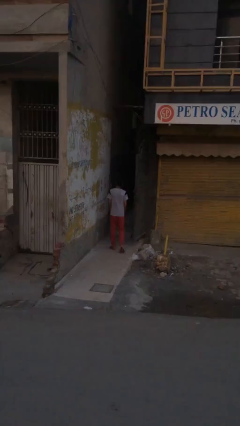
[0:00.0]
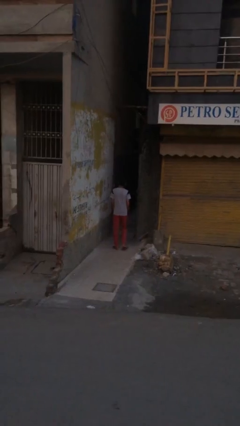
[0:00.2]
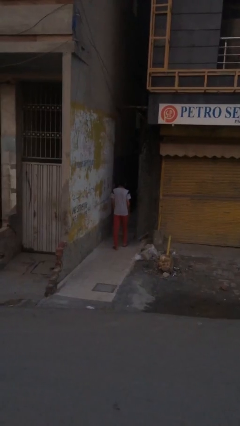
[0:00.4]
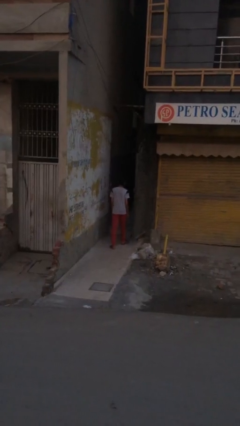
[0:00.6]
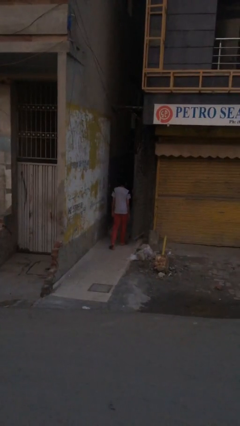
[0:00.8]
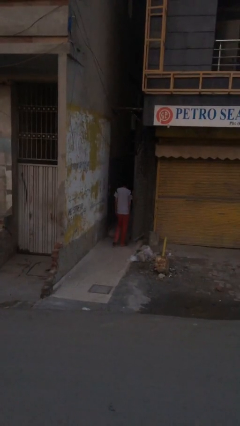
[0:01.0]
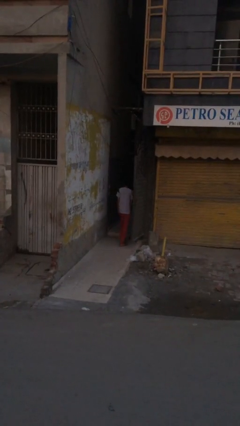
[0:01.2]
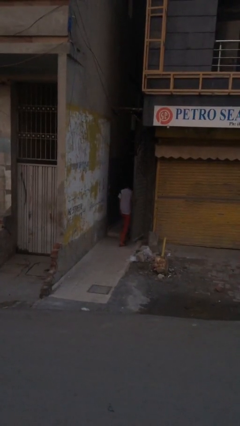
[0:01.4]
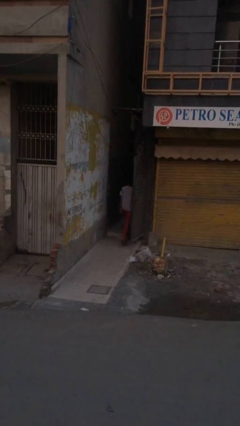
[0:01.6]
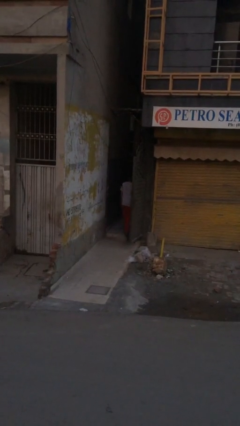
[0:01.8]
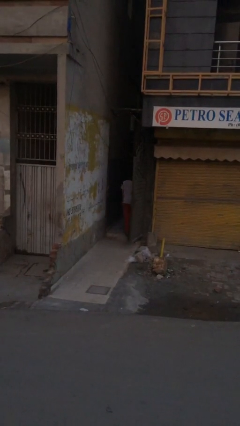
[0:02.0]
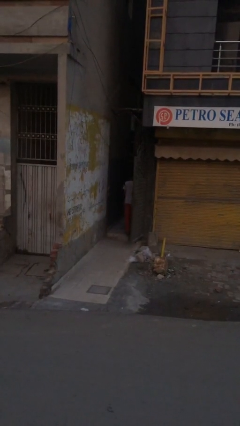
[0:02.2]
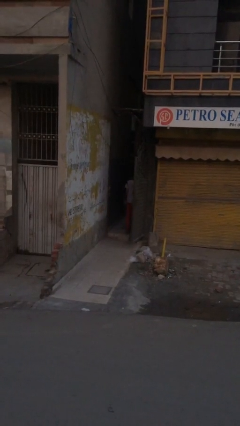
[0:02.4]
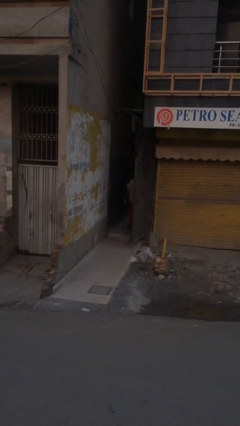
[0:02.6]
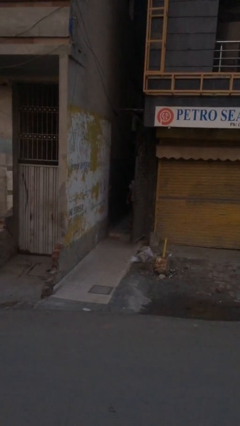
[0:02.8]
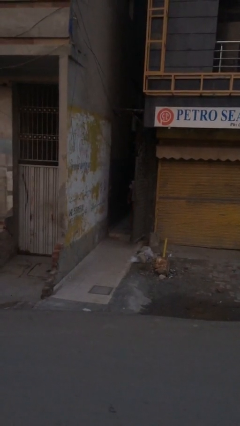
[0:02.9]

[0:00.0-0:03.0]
person exits scene through structure

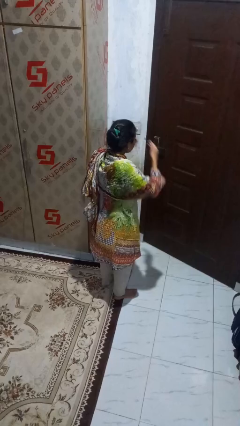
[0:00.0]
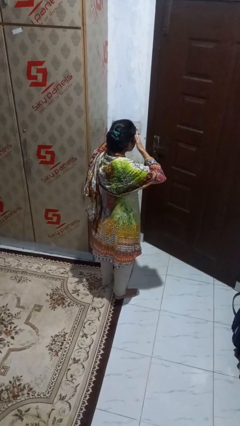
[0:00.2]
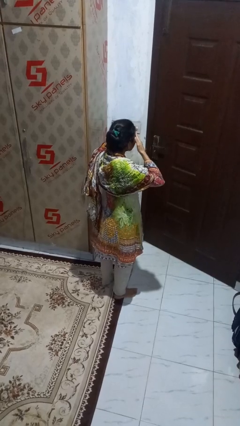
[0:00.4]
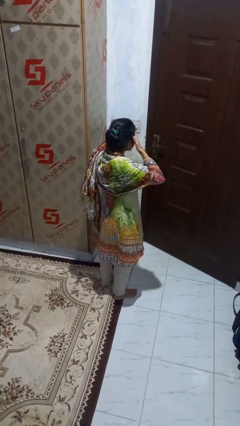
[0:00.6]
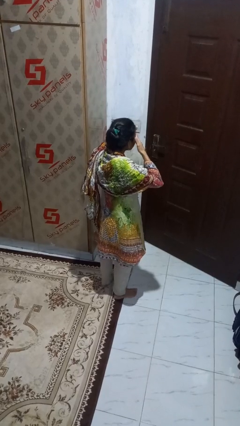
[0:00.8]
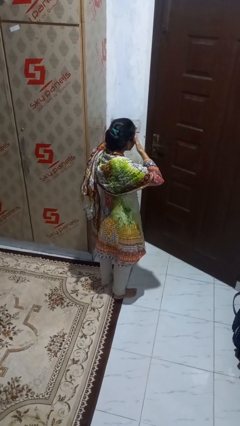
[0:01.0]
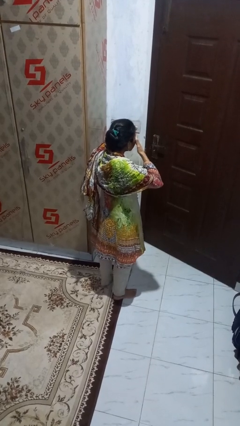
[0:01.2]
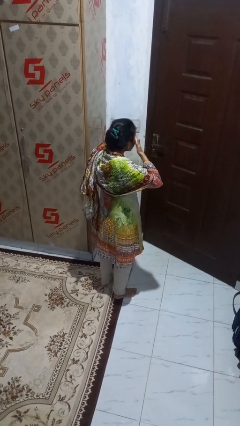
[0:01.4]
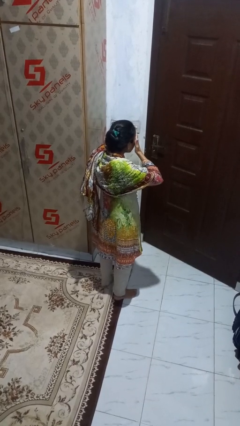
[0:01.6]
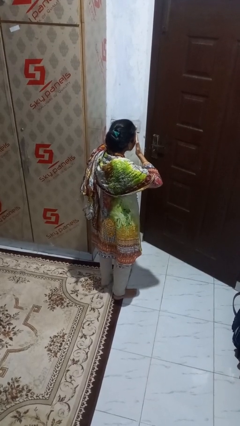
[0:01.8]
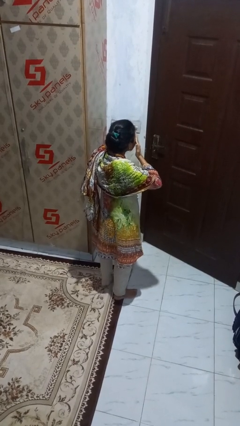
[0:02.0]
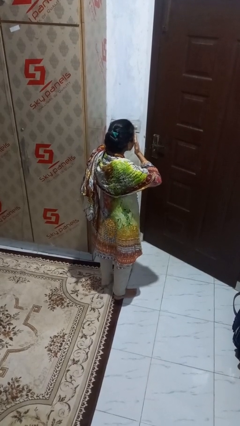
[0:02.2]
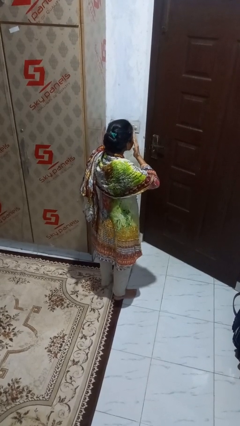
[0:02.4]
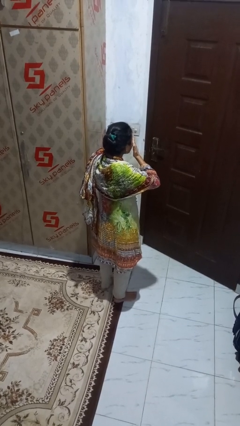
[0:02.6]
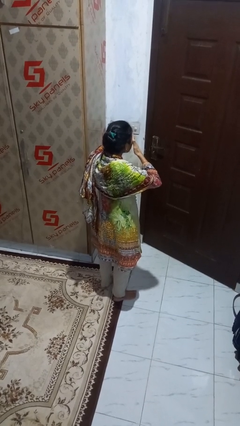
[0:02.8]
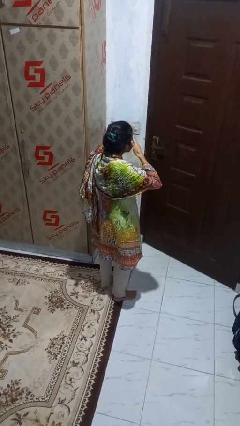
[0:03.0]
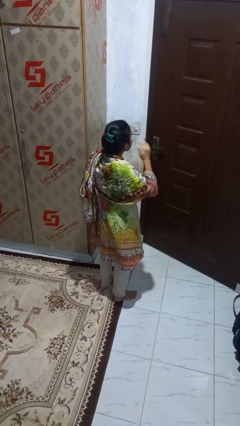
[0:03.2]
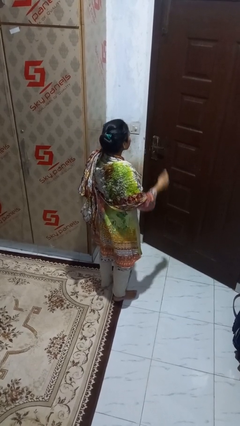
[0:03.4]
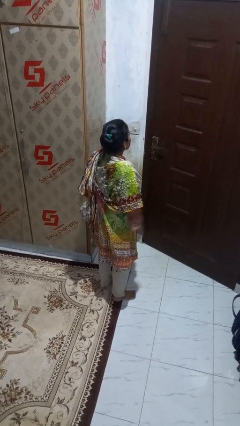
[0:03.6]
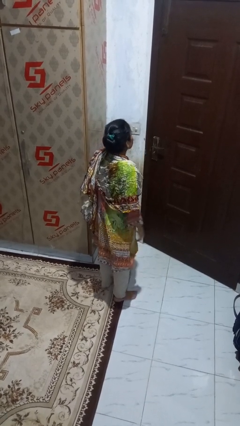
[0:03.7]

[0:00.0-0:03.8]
person rubs eyes

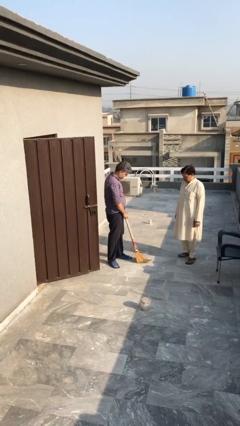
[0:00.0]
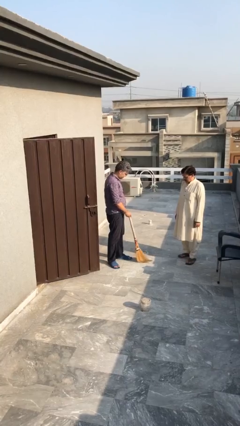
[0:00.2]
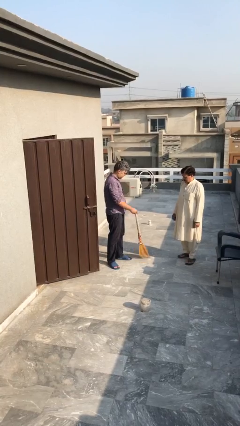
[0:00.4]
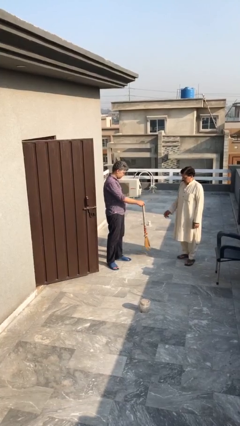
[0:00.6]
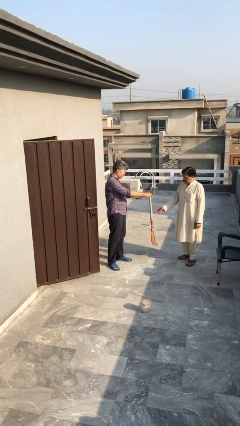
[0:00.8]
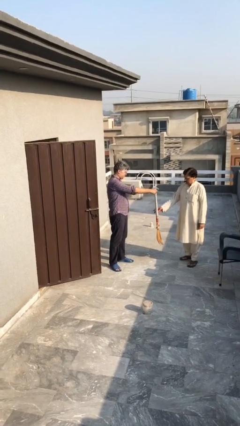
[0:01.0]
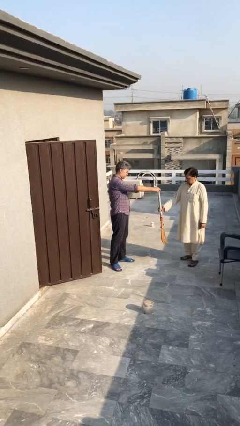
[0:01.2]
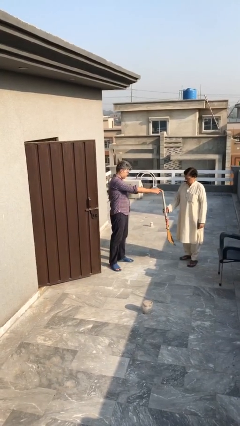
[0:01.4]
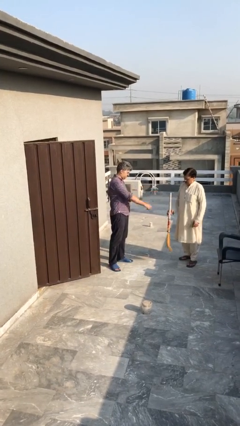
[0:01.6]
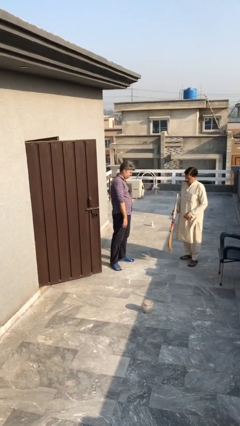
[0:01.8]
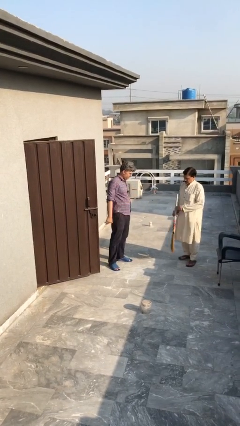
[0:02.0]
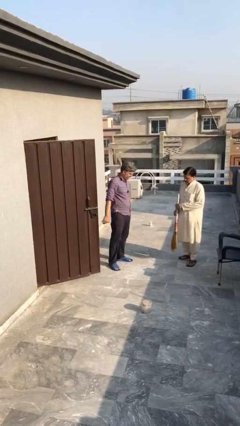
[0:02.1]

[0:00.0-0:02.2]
person transfers object to person

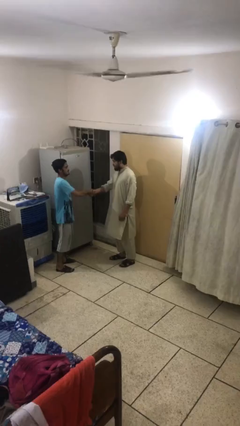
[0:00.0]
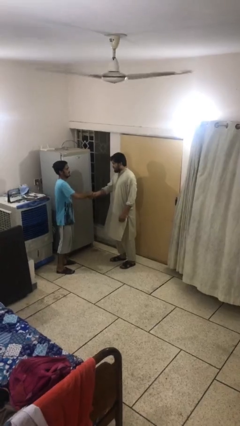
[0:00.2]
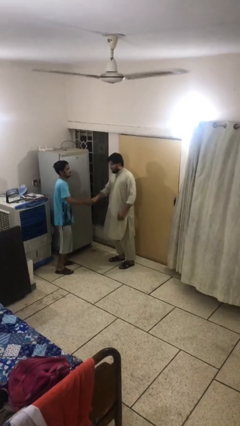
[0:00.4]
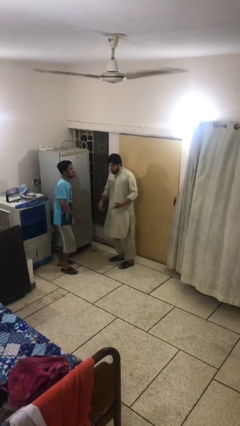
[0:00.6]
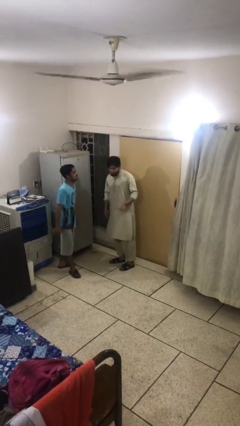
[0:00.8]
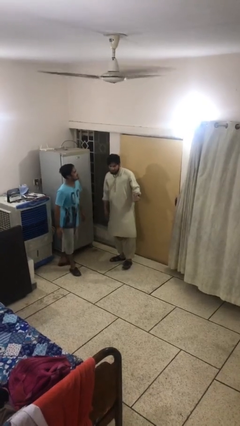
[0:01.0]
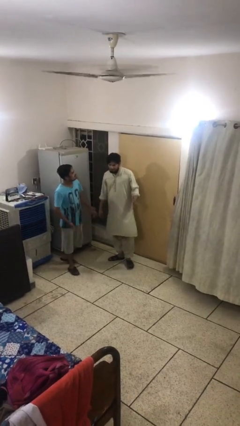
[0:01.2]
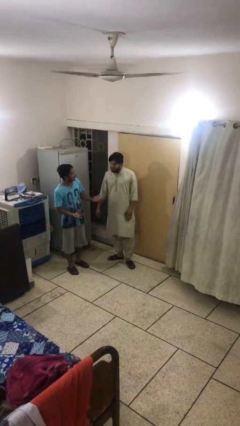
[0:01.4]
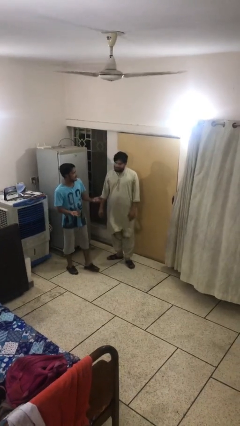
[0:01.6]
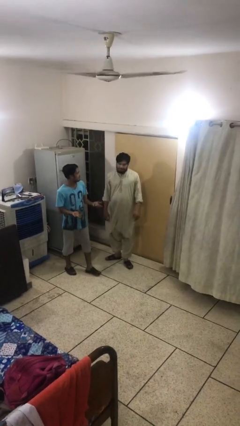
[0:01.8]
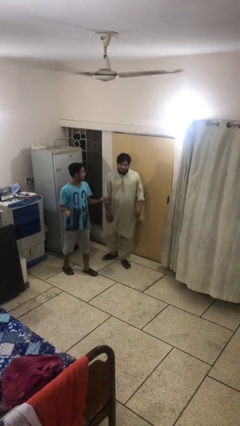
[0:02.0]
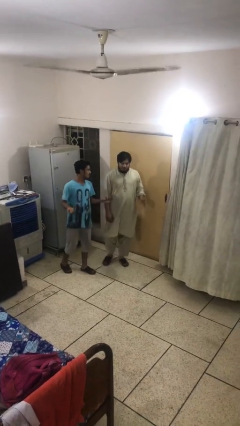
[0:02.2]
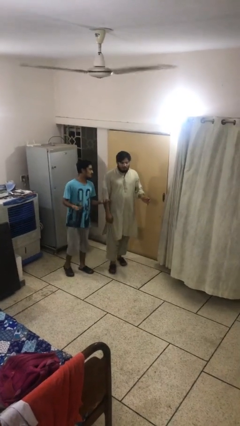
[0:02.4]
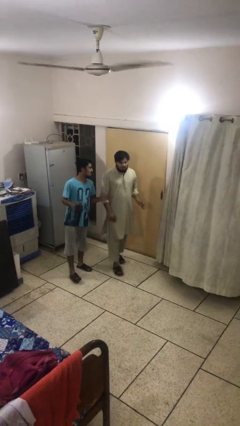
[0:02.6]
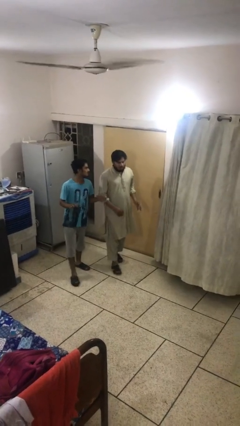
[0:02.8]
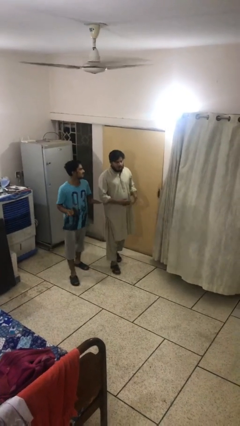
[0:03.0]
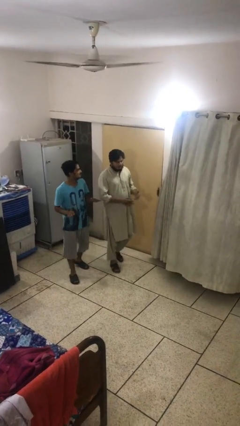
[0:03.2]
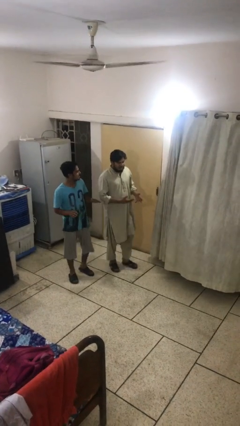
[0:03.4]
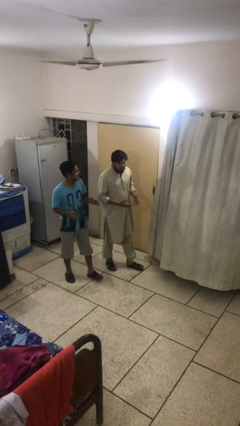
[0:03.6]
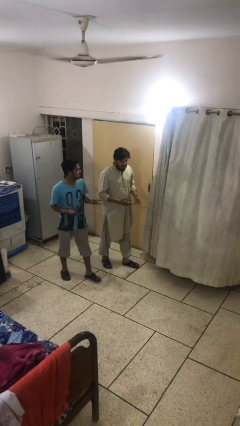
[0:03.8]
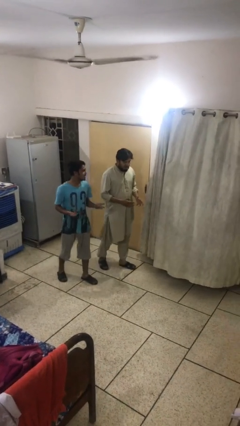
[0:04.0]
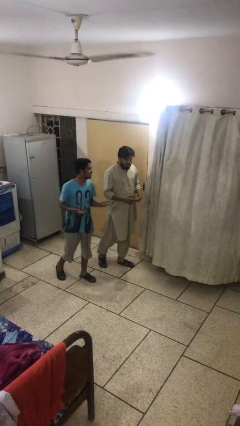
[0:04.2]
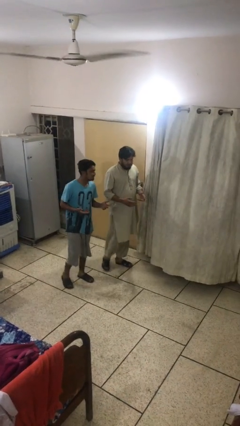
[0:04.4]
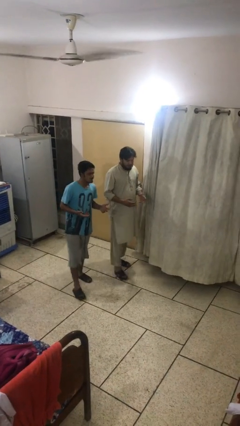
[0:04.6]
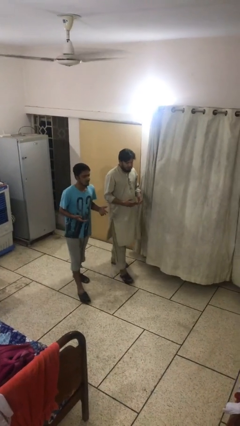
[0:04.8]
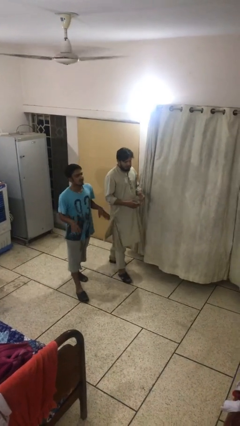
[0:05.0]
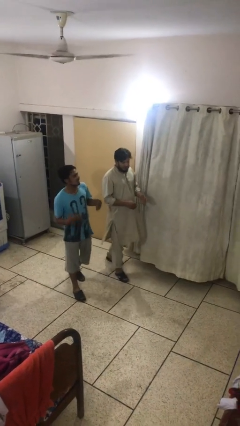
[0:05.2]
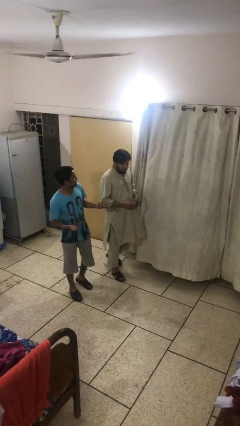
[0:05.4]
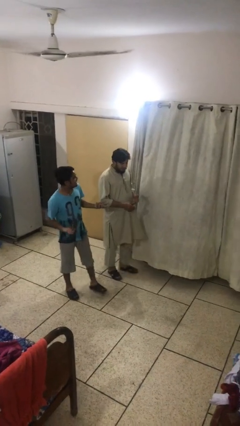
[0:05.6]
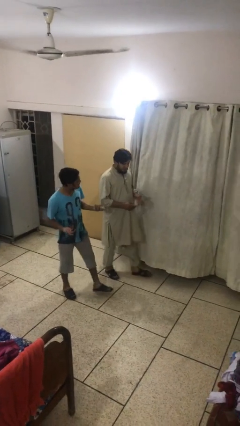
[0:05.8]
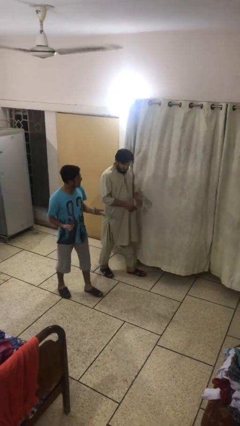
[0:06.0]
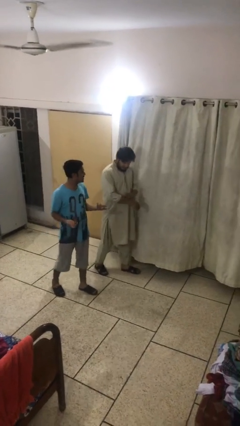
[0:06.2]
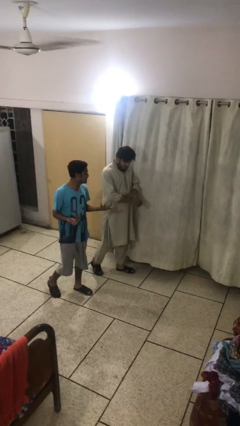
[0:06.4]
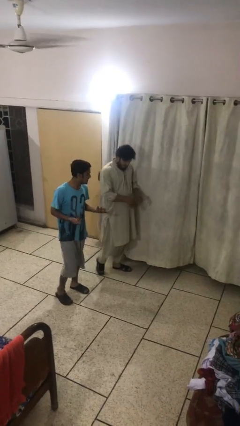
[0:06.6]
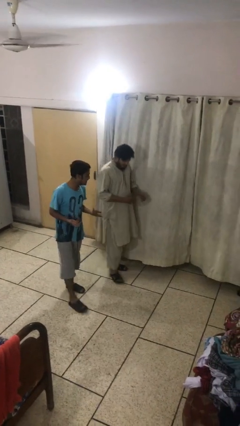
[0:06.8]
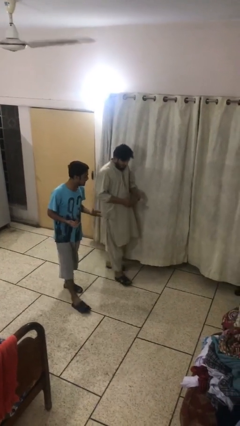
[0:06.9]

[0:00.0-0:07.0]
person talks to person

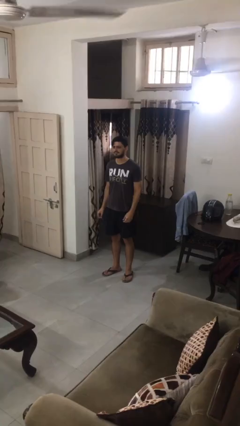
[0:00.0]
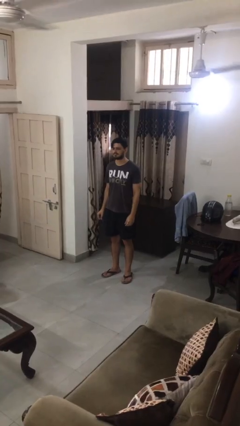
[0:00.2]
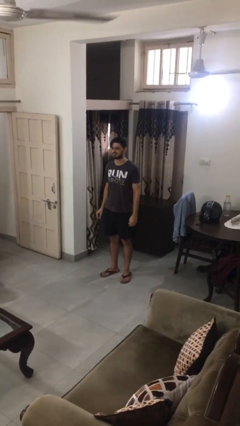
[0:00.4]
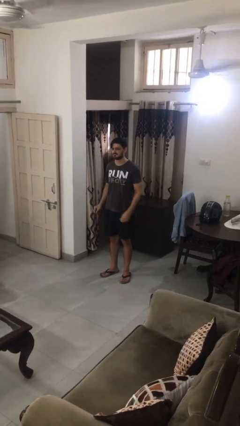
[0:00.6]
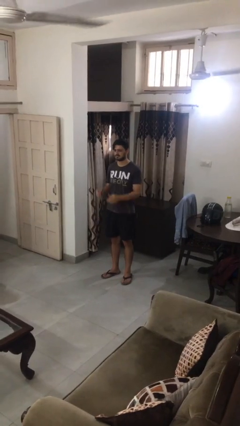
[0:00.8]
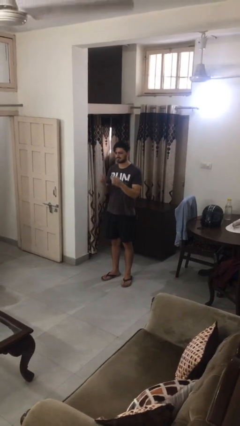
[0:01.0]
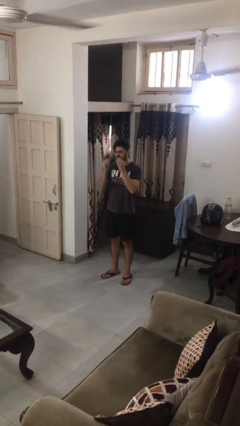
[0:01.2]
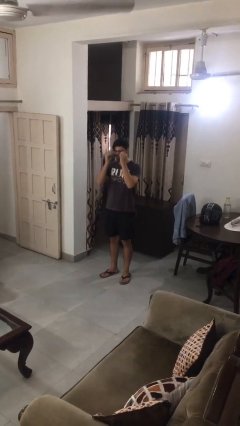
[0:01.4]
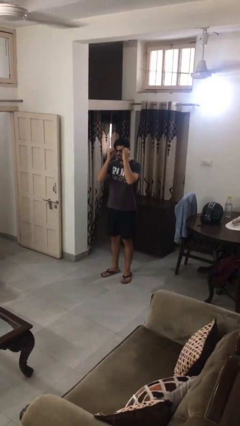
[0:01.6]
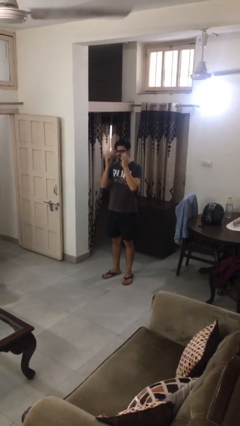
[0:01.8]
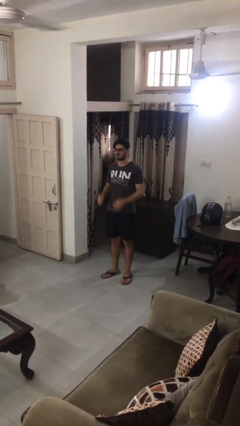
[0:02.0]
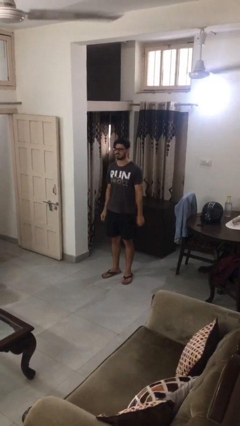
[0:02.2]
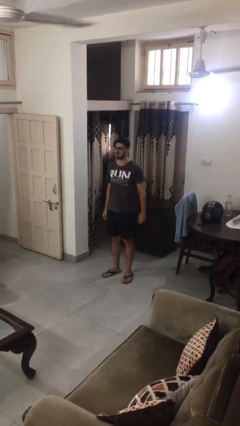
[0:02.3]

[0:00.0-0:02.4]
person puts on glasses
